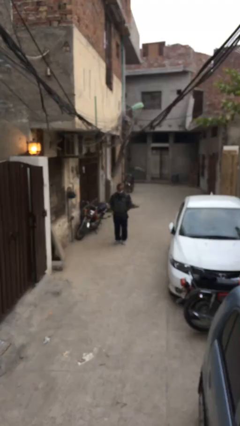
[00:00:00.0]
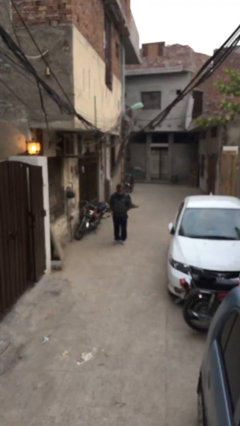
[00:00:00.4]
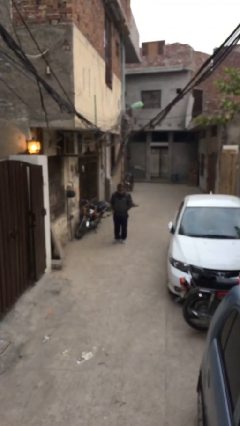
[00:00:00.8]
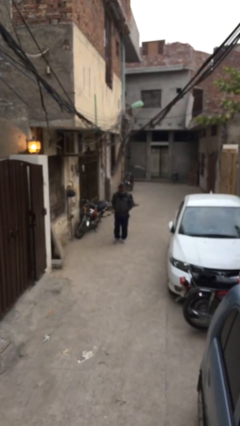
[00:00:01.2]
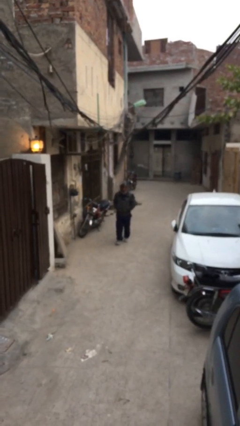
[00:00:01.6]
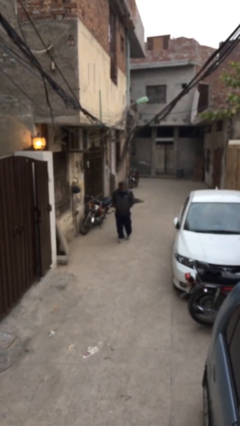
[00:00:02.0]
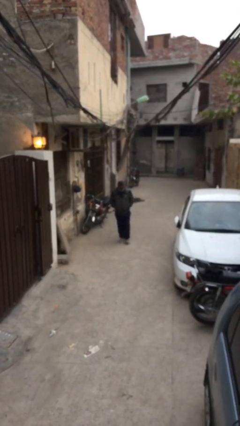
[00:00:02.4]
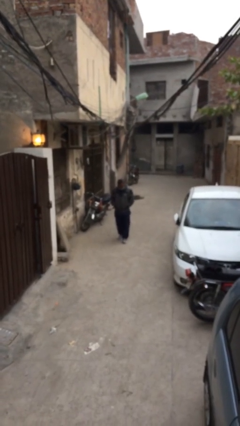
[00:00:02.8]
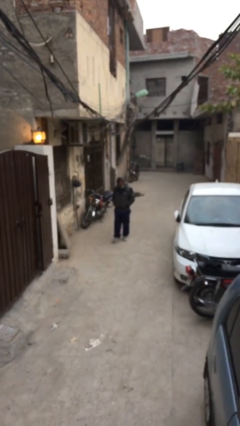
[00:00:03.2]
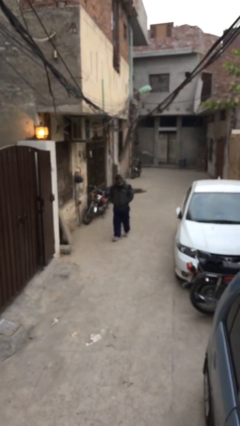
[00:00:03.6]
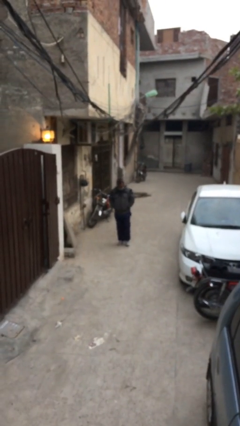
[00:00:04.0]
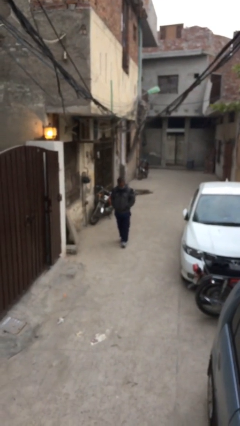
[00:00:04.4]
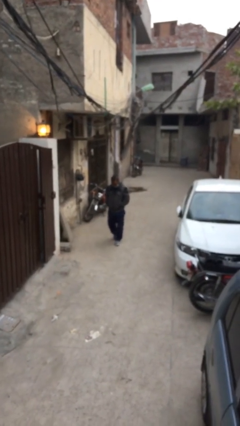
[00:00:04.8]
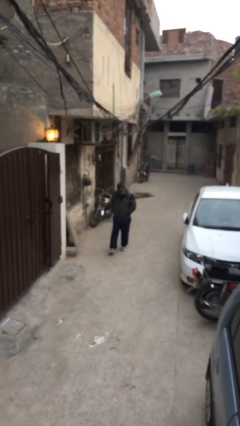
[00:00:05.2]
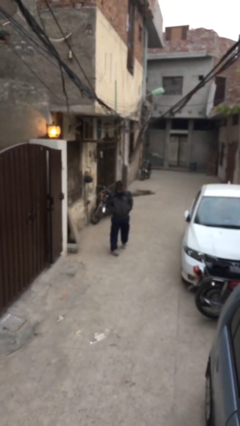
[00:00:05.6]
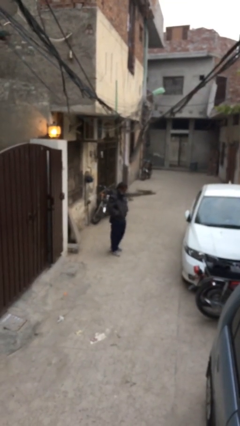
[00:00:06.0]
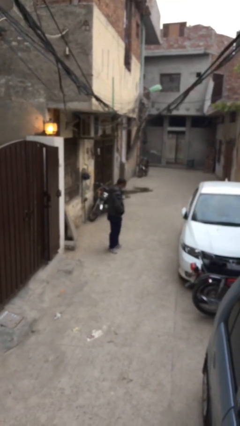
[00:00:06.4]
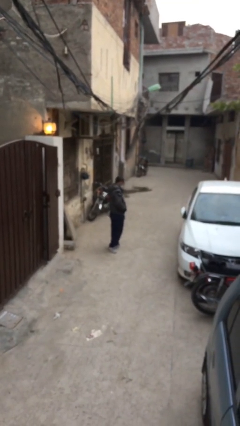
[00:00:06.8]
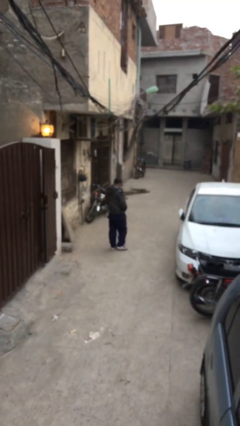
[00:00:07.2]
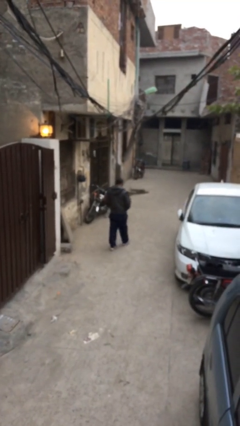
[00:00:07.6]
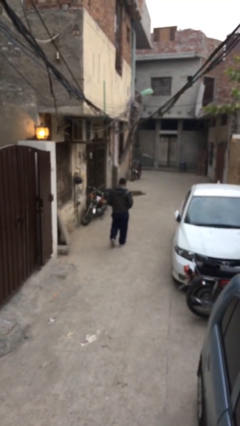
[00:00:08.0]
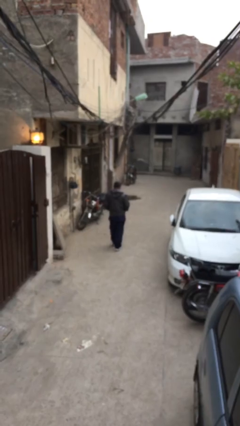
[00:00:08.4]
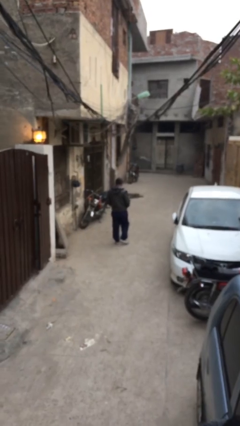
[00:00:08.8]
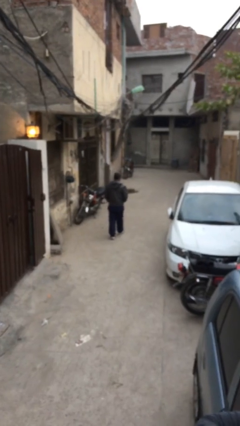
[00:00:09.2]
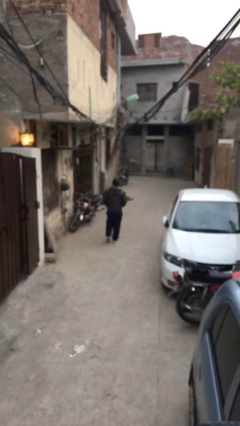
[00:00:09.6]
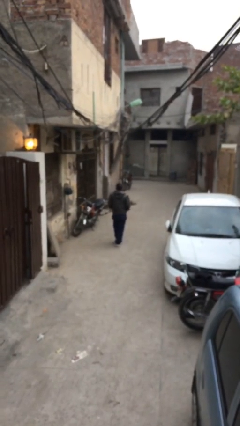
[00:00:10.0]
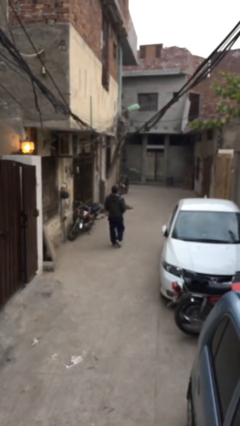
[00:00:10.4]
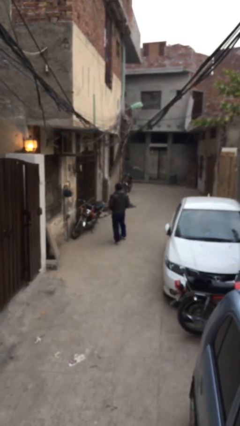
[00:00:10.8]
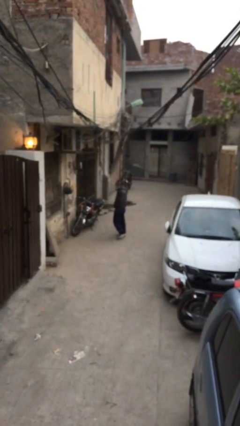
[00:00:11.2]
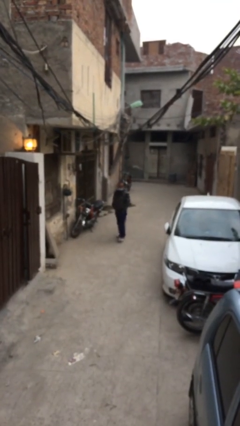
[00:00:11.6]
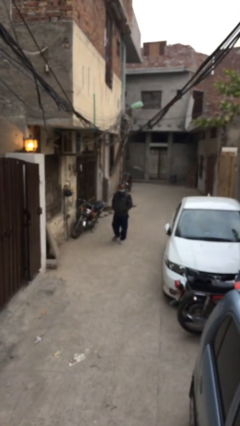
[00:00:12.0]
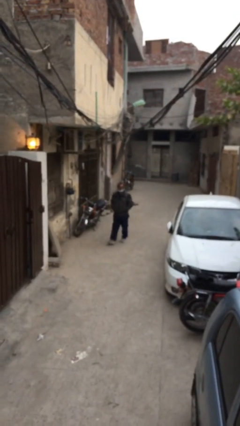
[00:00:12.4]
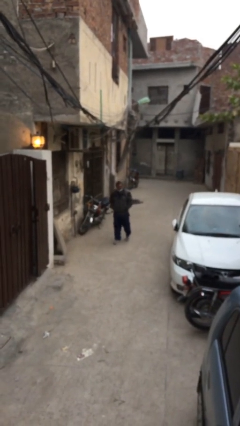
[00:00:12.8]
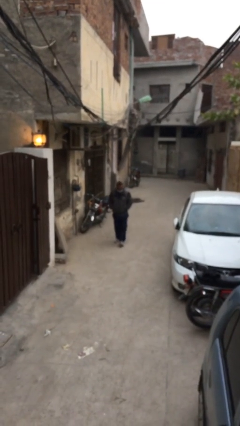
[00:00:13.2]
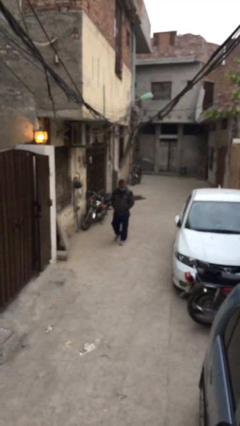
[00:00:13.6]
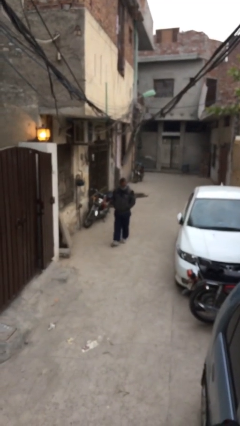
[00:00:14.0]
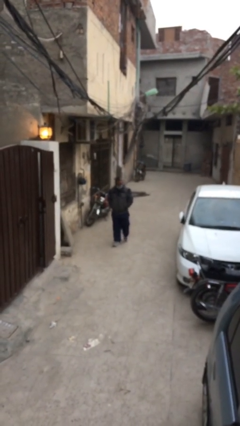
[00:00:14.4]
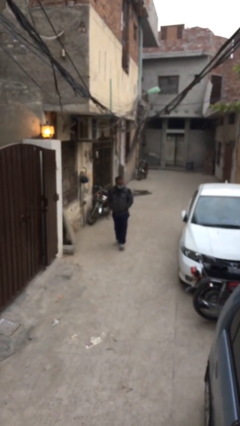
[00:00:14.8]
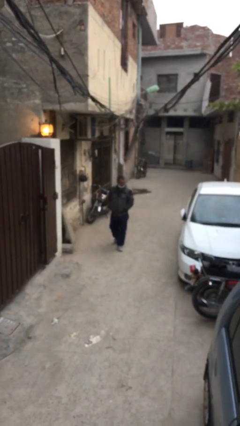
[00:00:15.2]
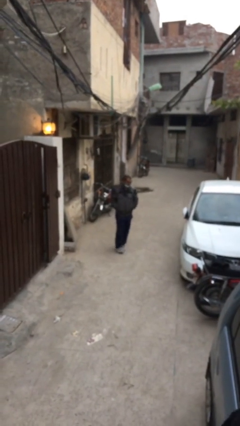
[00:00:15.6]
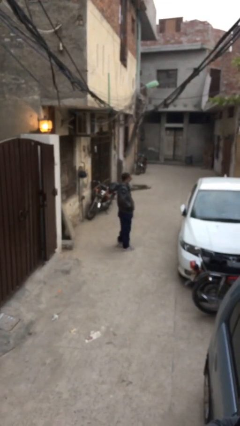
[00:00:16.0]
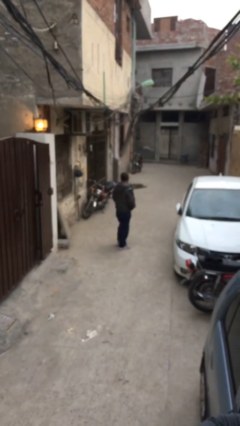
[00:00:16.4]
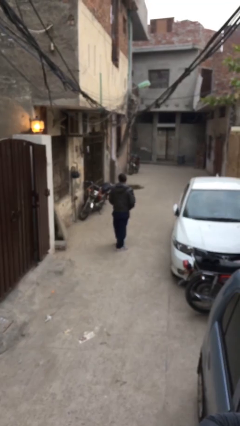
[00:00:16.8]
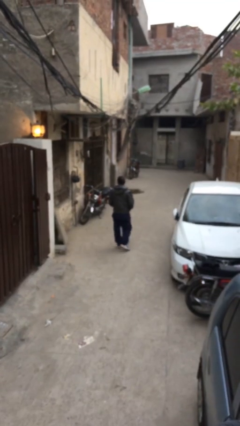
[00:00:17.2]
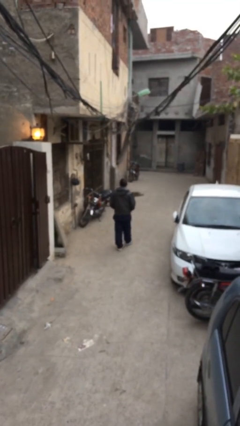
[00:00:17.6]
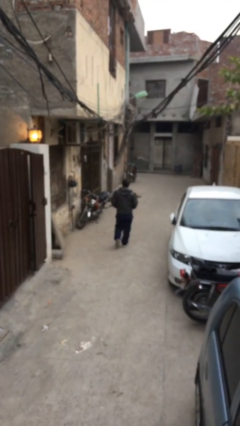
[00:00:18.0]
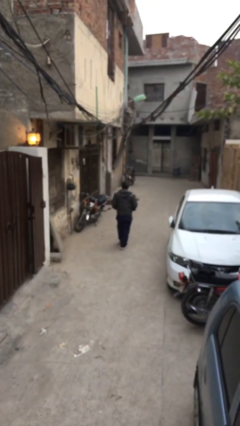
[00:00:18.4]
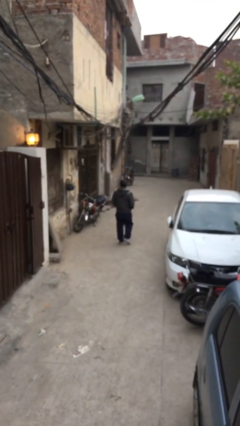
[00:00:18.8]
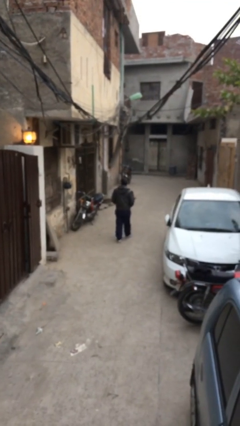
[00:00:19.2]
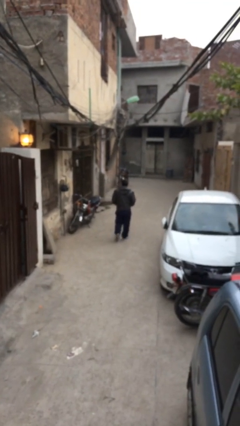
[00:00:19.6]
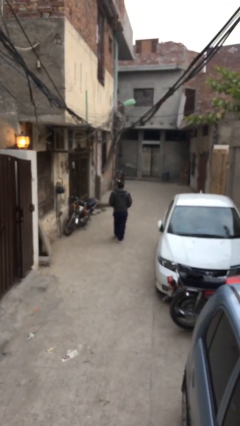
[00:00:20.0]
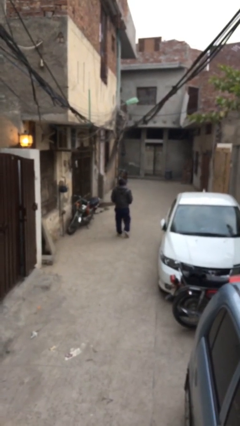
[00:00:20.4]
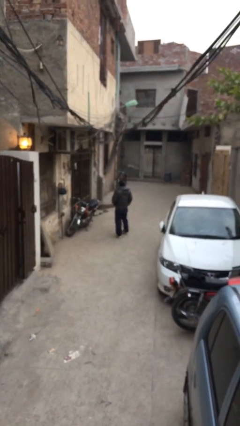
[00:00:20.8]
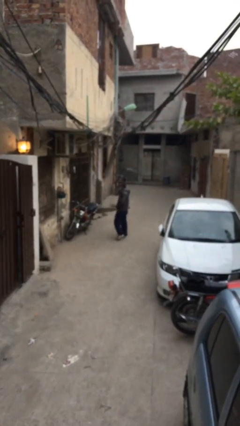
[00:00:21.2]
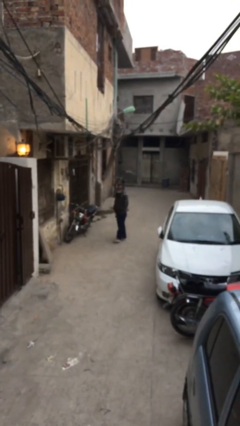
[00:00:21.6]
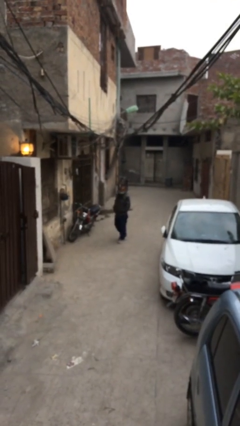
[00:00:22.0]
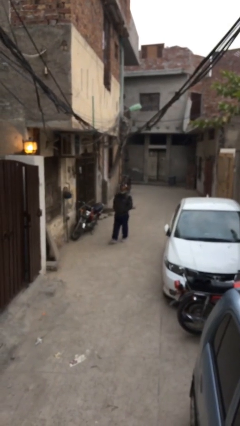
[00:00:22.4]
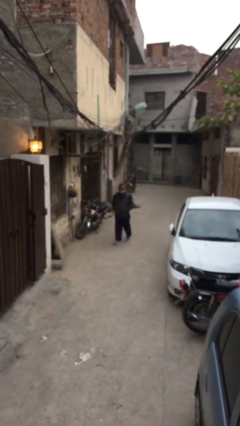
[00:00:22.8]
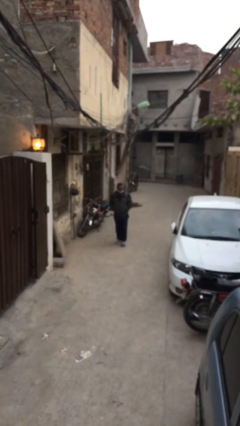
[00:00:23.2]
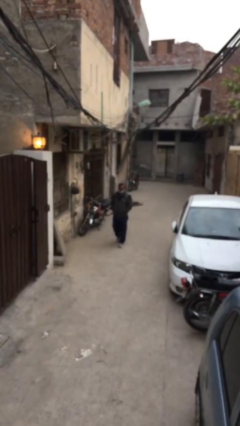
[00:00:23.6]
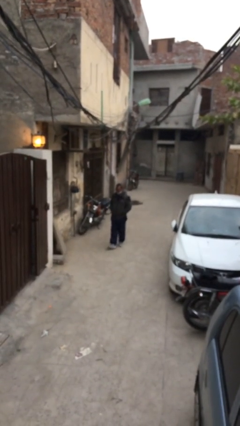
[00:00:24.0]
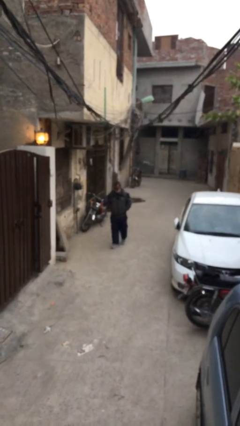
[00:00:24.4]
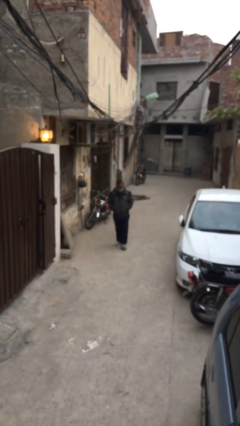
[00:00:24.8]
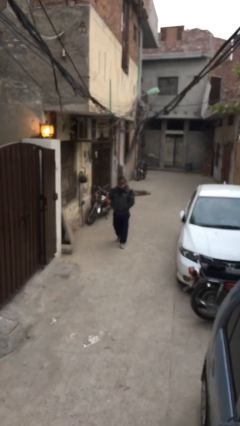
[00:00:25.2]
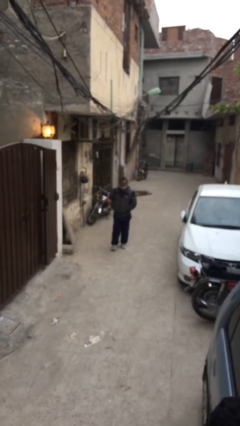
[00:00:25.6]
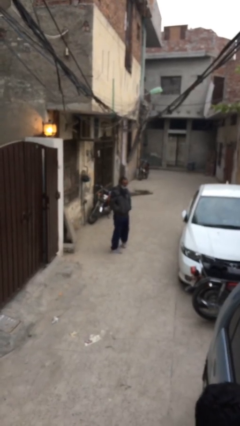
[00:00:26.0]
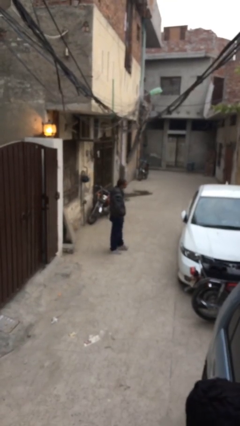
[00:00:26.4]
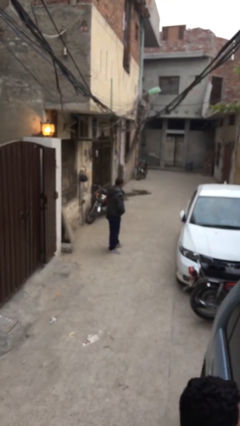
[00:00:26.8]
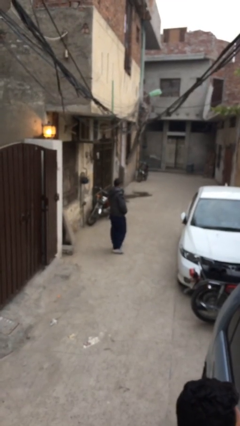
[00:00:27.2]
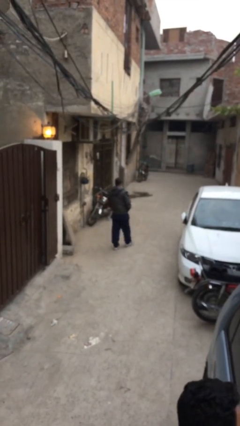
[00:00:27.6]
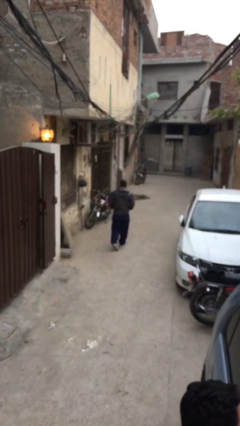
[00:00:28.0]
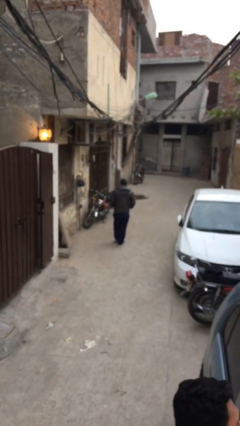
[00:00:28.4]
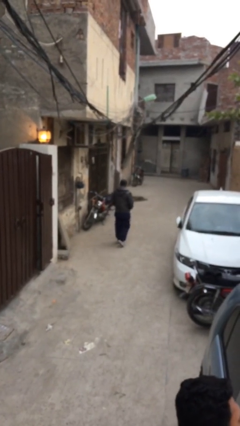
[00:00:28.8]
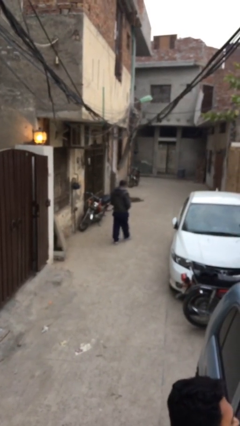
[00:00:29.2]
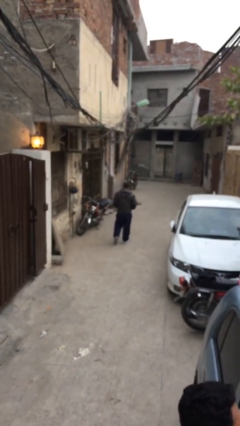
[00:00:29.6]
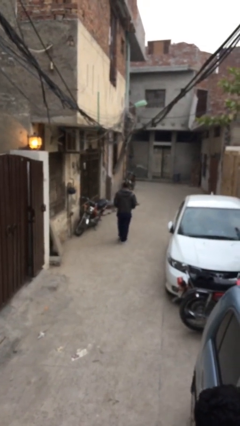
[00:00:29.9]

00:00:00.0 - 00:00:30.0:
person walks

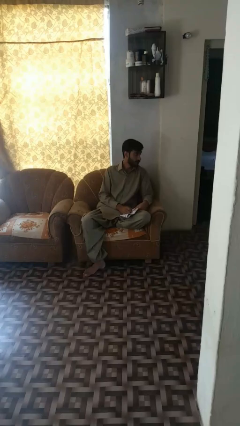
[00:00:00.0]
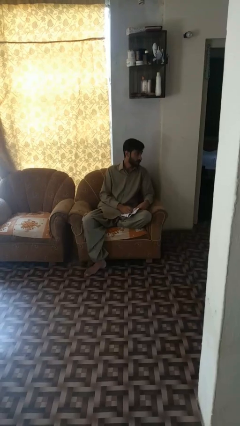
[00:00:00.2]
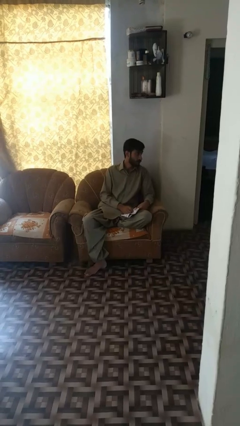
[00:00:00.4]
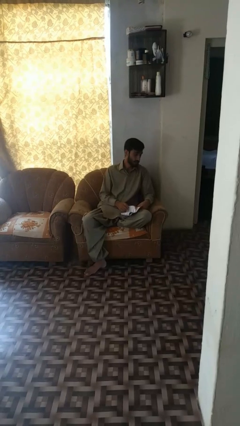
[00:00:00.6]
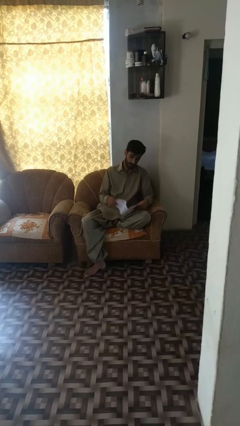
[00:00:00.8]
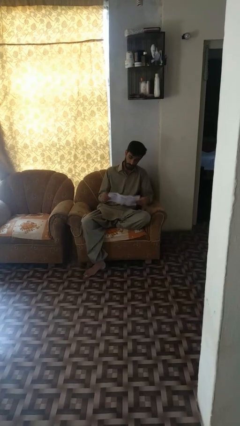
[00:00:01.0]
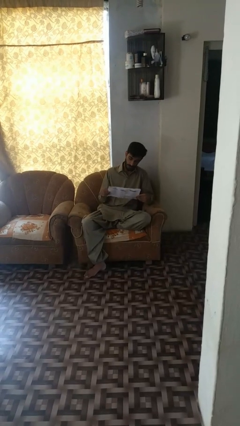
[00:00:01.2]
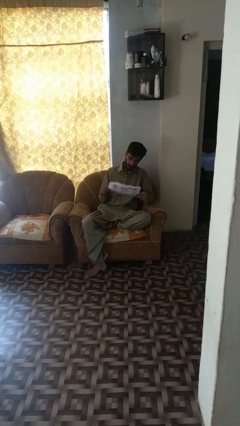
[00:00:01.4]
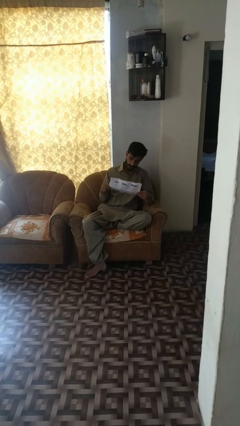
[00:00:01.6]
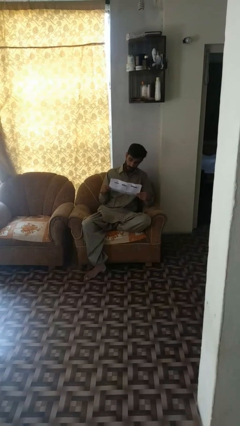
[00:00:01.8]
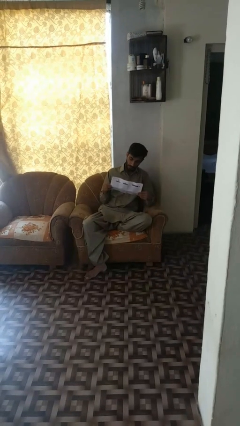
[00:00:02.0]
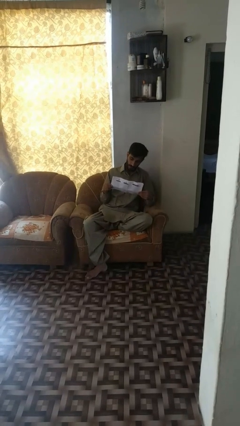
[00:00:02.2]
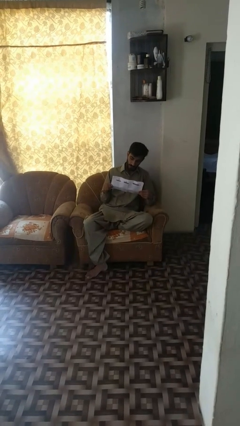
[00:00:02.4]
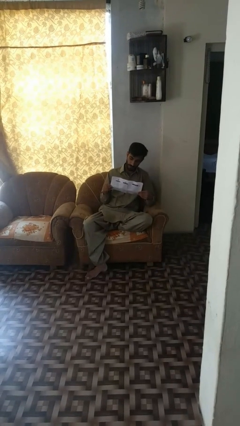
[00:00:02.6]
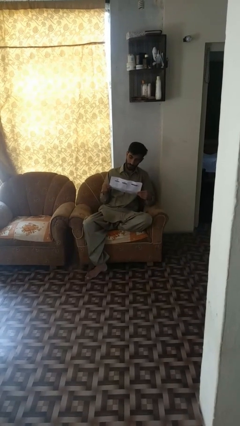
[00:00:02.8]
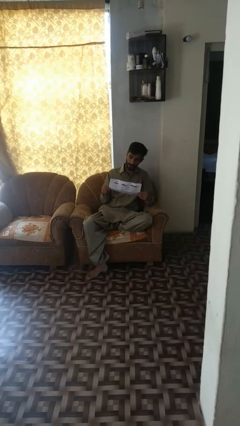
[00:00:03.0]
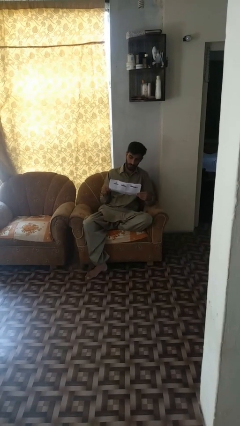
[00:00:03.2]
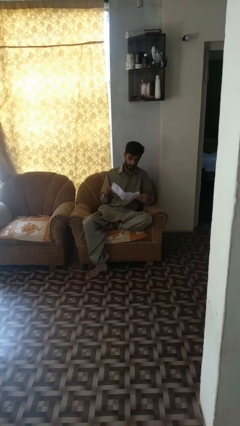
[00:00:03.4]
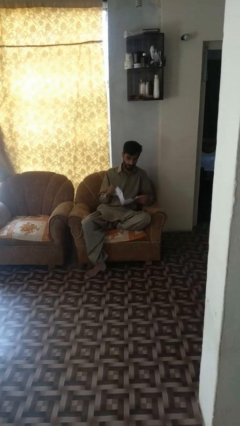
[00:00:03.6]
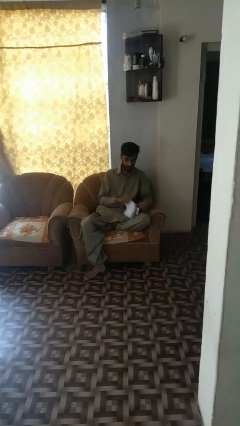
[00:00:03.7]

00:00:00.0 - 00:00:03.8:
person reads newspaper
